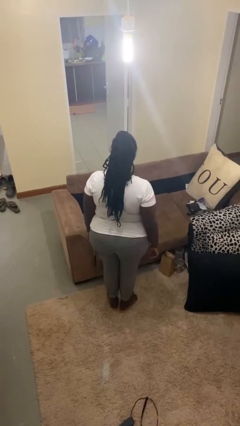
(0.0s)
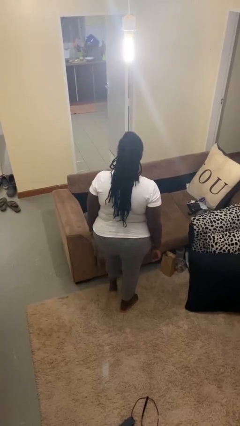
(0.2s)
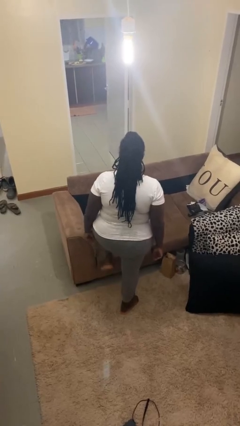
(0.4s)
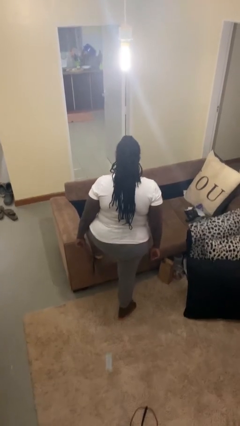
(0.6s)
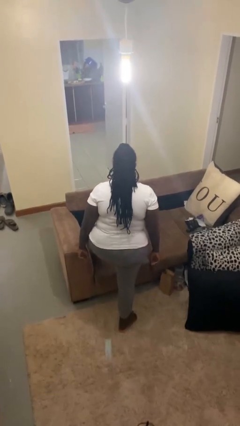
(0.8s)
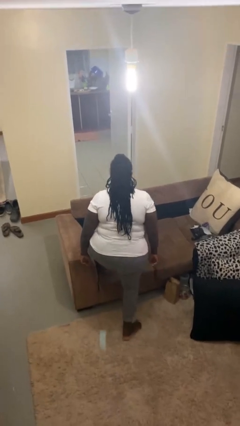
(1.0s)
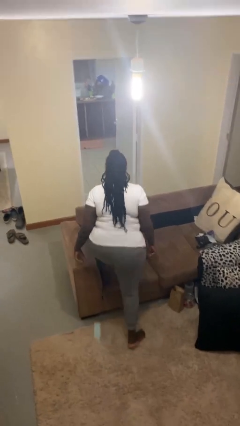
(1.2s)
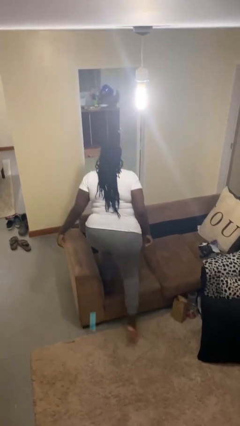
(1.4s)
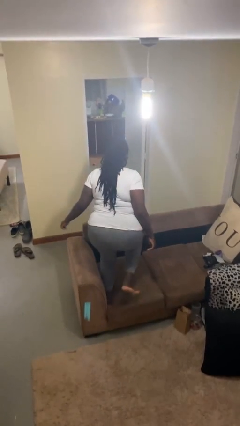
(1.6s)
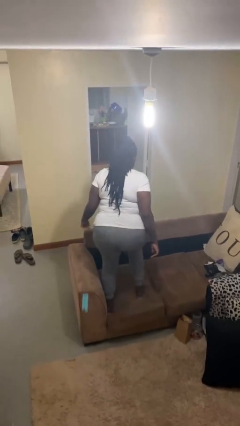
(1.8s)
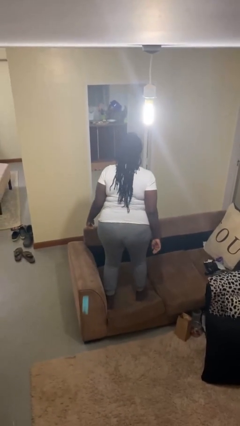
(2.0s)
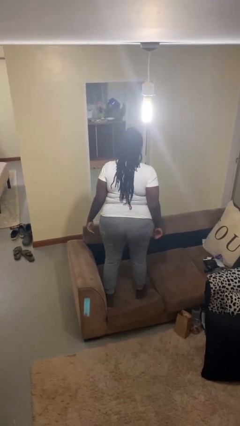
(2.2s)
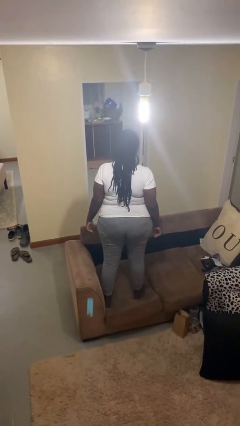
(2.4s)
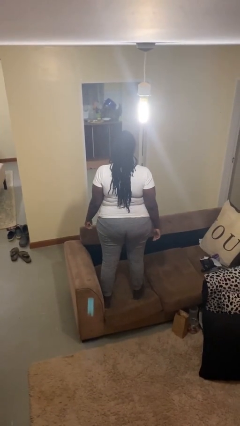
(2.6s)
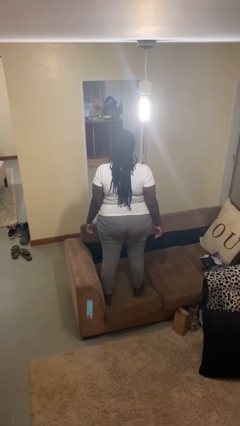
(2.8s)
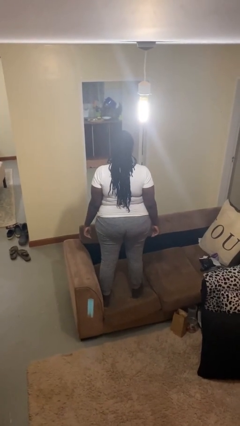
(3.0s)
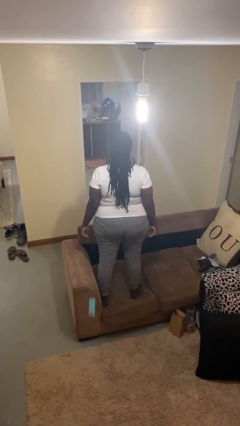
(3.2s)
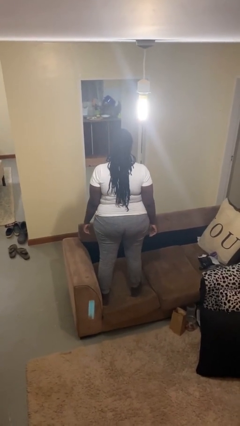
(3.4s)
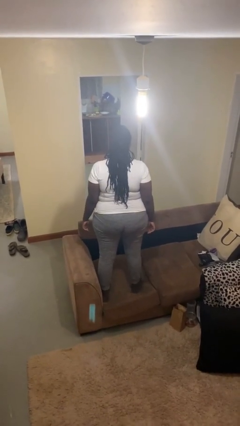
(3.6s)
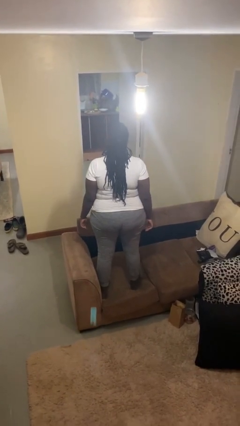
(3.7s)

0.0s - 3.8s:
person climbs on couch

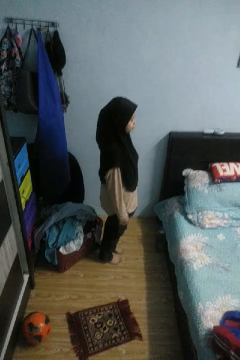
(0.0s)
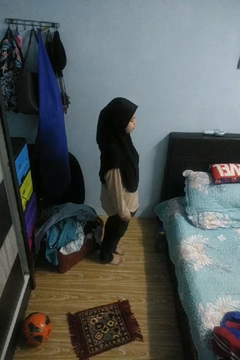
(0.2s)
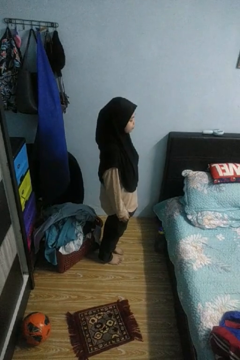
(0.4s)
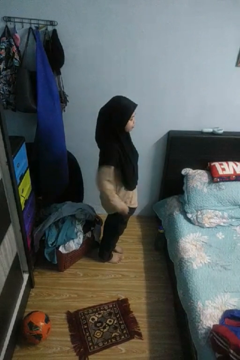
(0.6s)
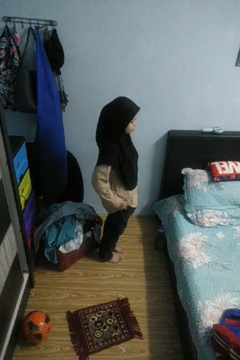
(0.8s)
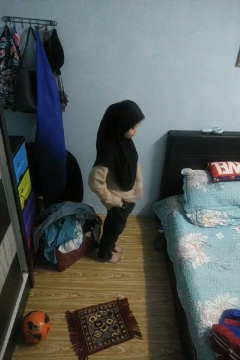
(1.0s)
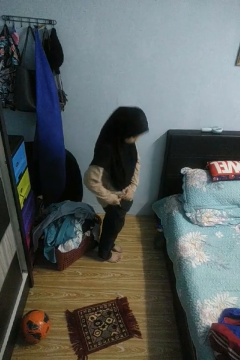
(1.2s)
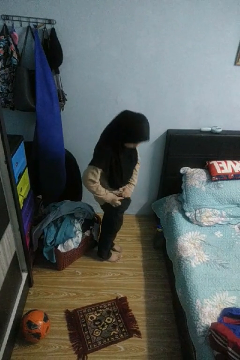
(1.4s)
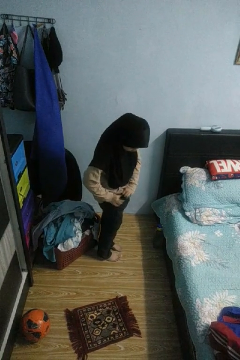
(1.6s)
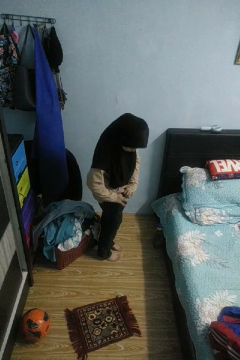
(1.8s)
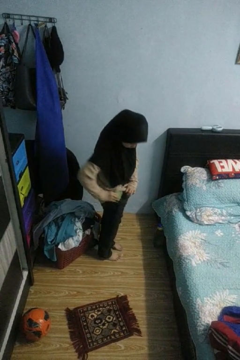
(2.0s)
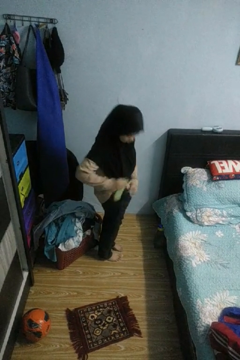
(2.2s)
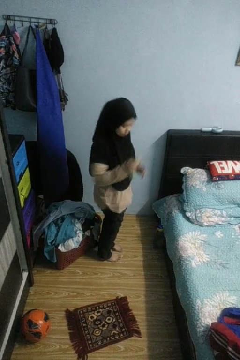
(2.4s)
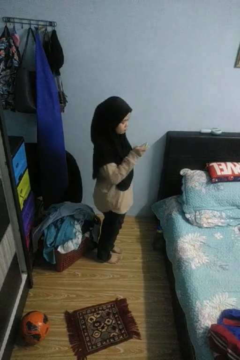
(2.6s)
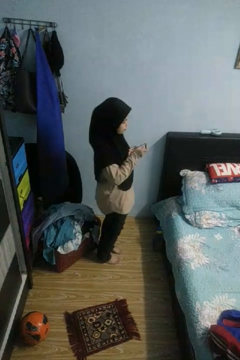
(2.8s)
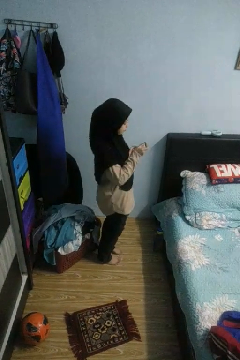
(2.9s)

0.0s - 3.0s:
person takes phone from pocket

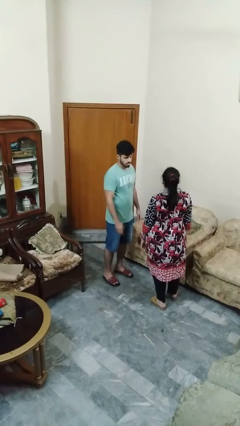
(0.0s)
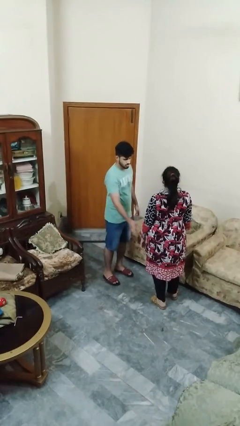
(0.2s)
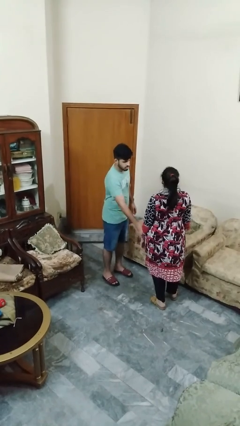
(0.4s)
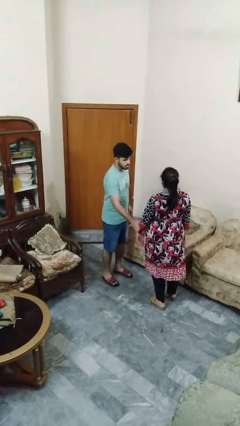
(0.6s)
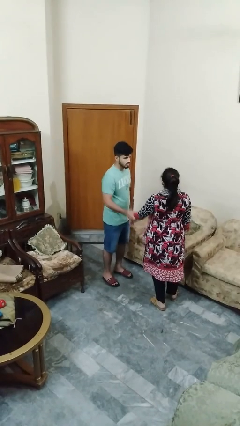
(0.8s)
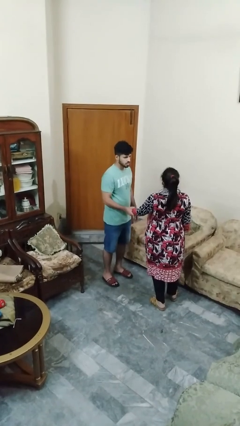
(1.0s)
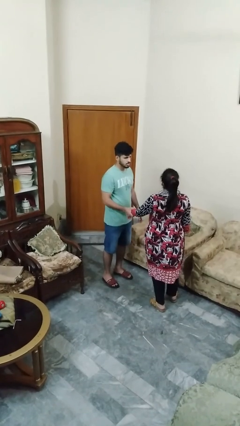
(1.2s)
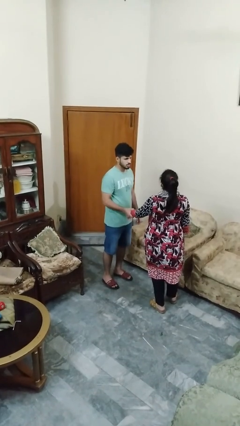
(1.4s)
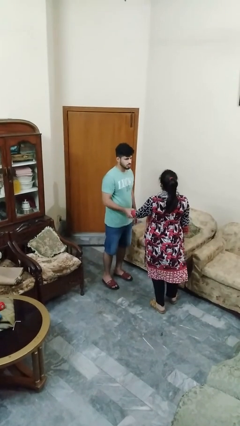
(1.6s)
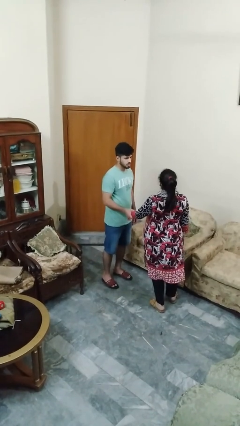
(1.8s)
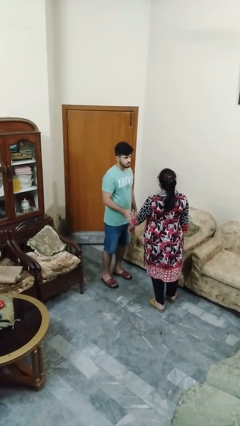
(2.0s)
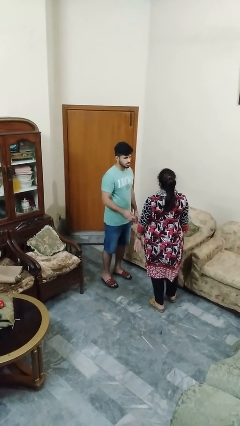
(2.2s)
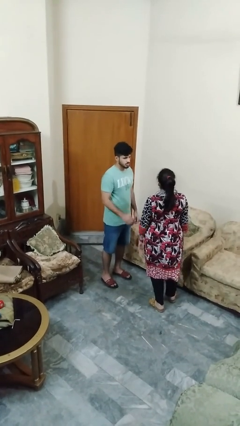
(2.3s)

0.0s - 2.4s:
person grabs person by forearm

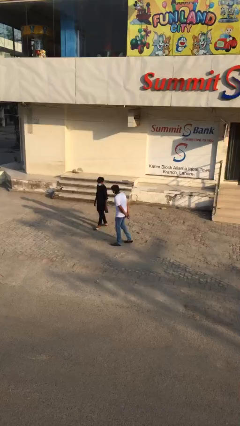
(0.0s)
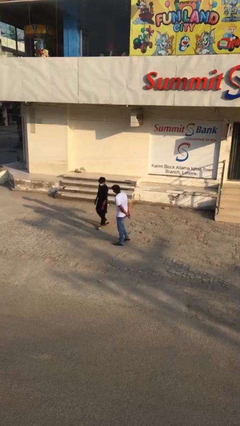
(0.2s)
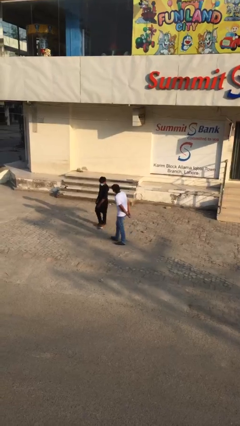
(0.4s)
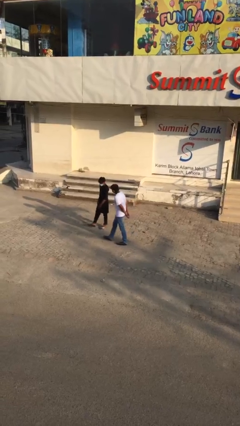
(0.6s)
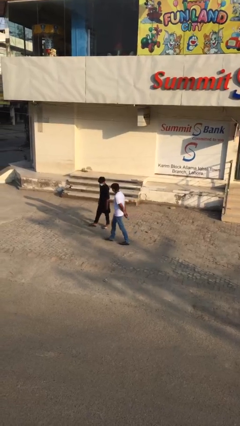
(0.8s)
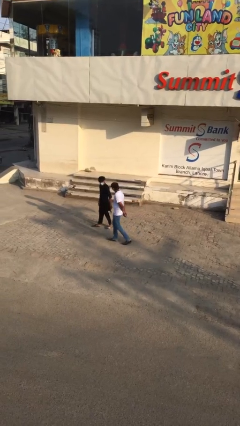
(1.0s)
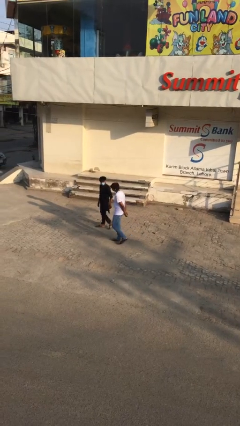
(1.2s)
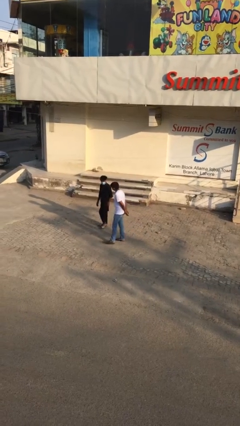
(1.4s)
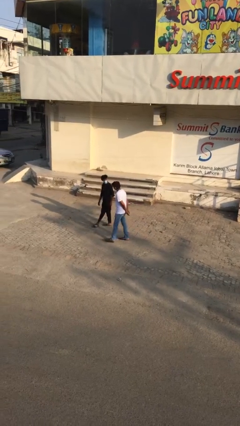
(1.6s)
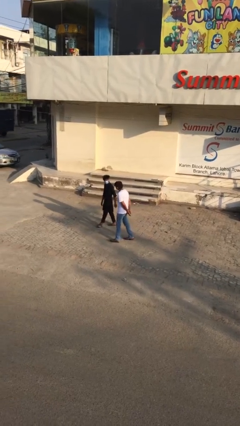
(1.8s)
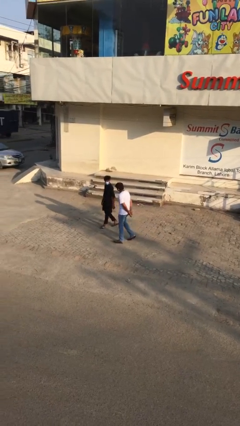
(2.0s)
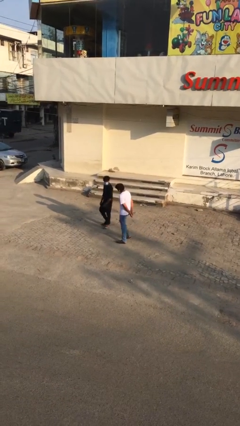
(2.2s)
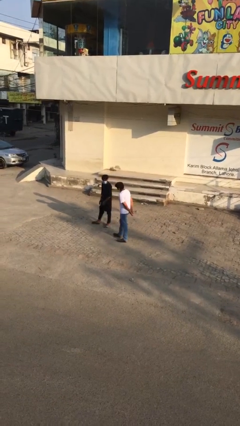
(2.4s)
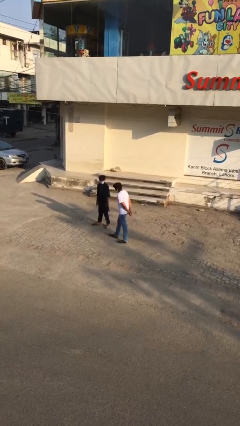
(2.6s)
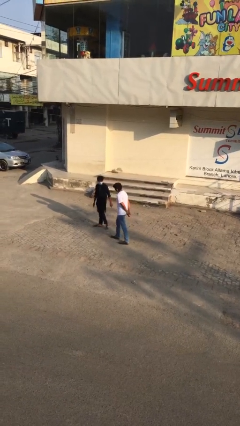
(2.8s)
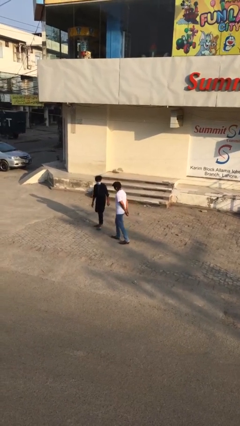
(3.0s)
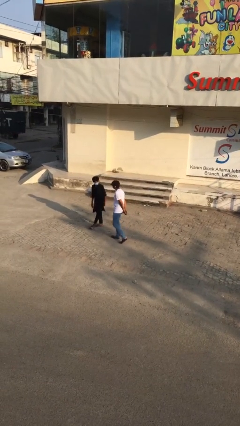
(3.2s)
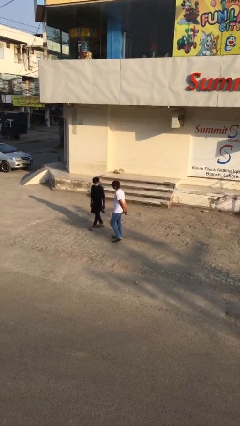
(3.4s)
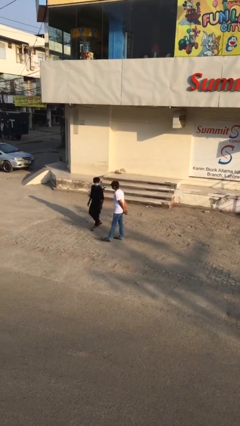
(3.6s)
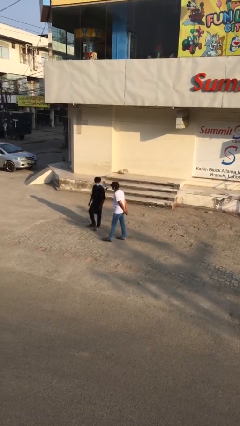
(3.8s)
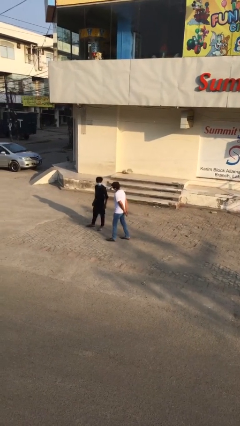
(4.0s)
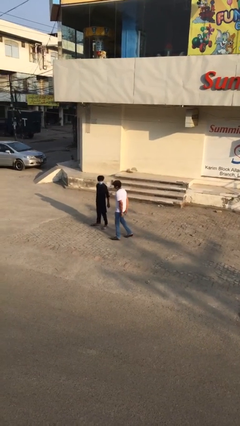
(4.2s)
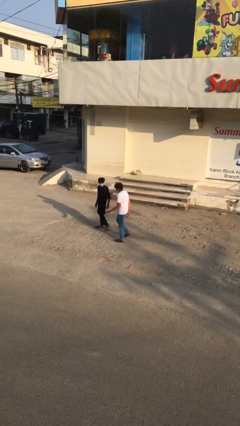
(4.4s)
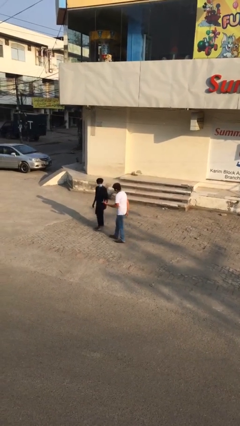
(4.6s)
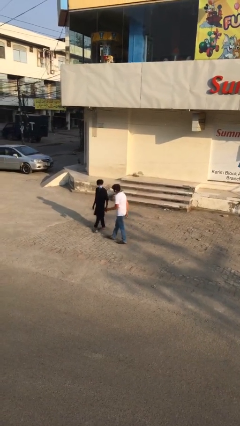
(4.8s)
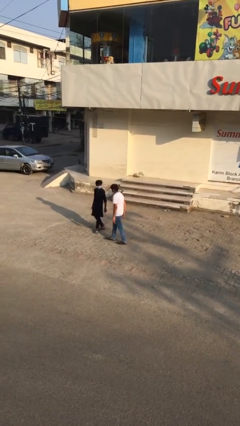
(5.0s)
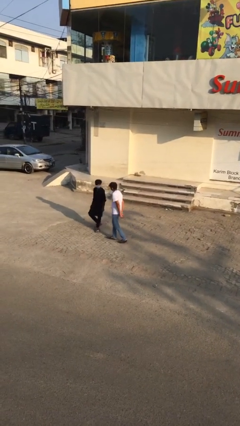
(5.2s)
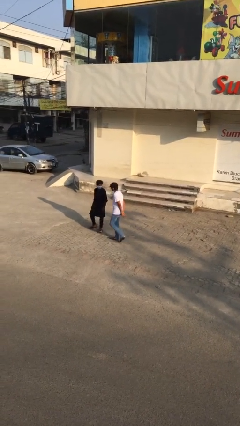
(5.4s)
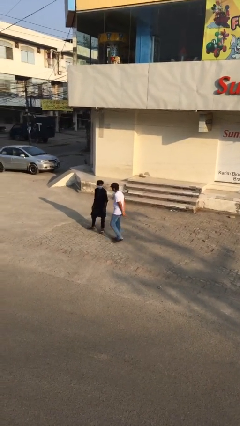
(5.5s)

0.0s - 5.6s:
person talks to person

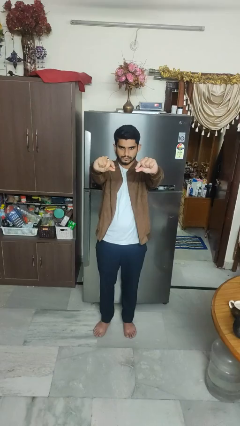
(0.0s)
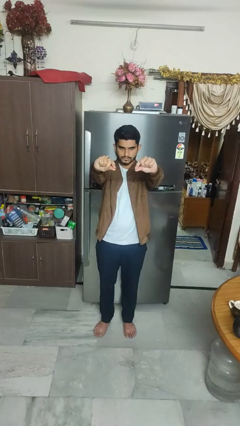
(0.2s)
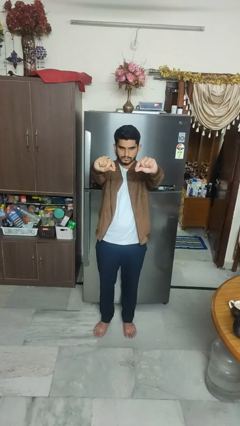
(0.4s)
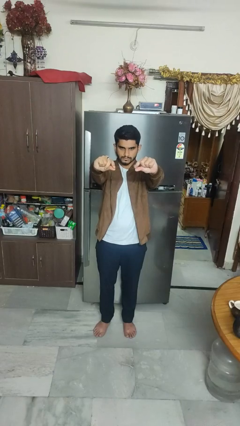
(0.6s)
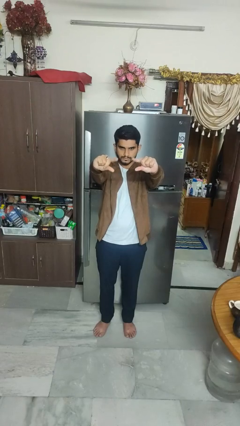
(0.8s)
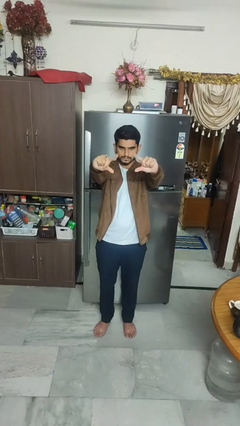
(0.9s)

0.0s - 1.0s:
person gestures zoom out

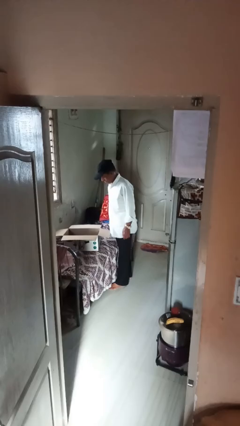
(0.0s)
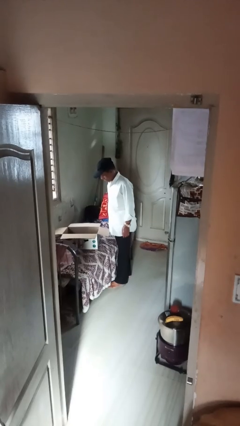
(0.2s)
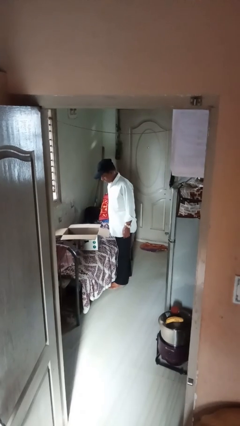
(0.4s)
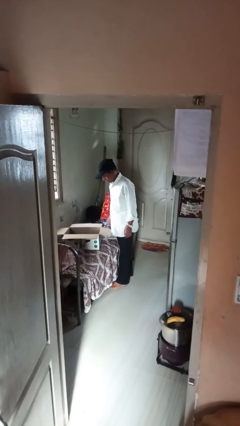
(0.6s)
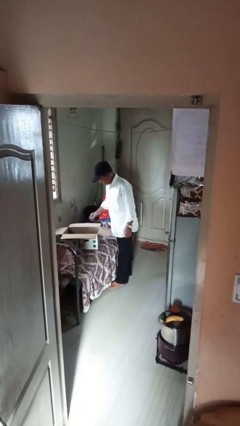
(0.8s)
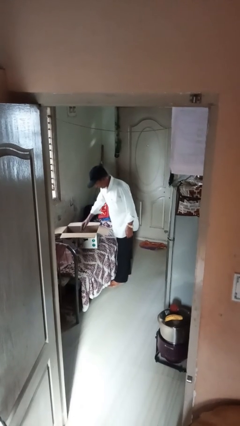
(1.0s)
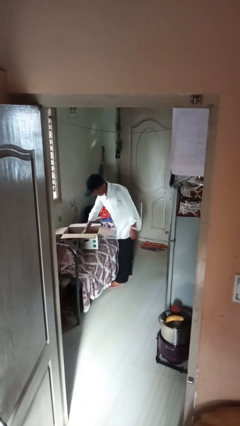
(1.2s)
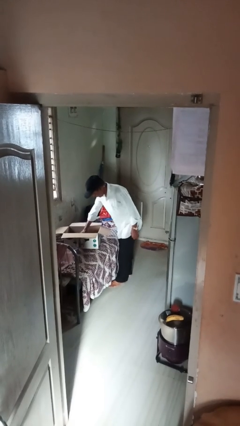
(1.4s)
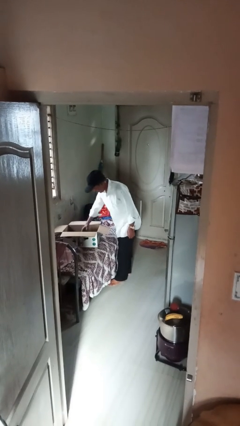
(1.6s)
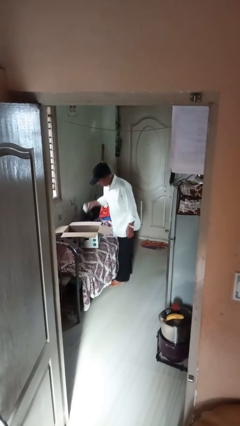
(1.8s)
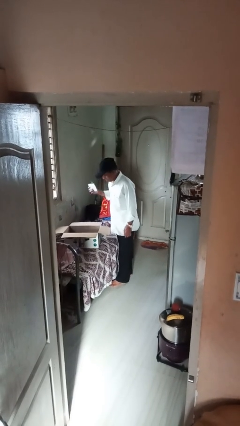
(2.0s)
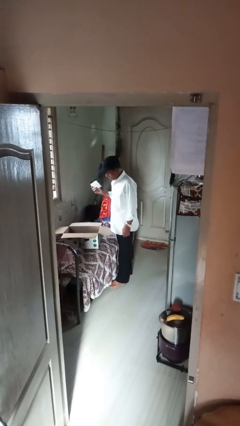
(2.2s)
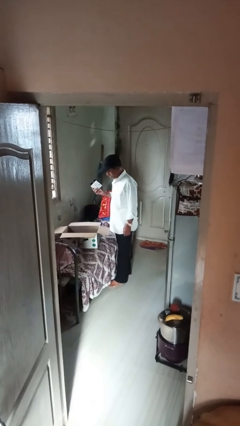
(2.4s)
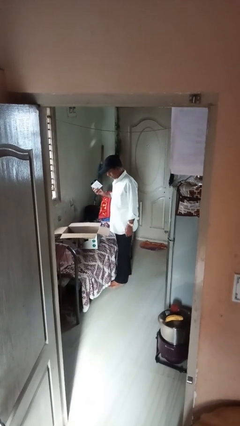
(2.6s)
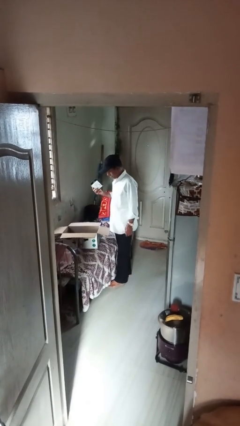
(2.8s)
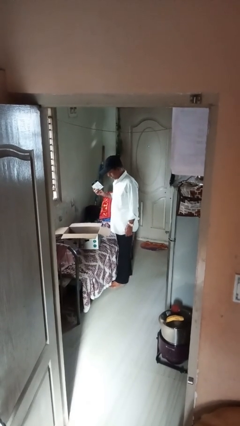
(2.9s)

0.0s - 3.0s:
person takes object from box
